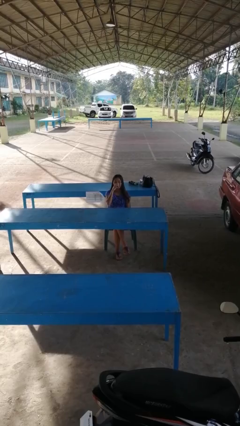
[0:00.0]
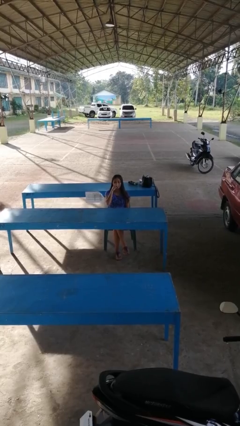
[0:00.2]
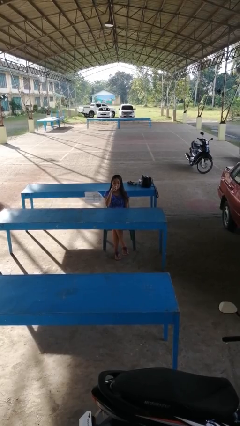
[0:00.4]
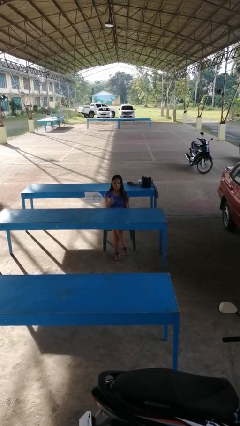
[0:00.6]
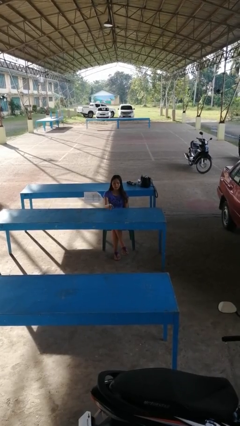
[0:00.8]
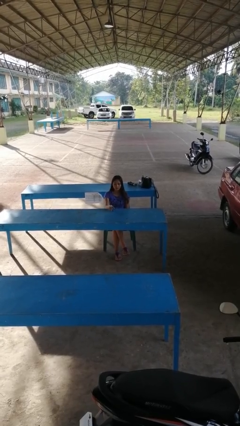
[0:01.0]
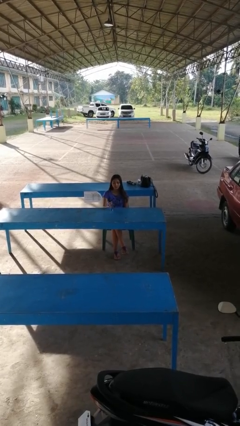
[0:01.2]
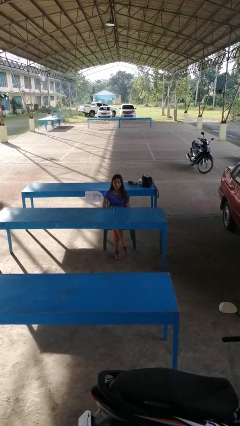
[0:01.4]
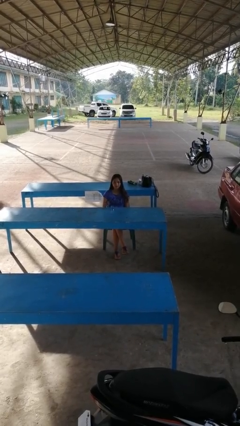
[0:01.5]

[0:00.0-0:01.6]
person puts down object on table

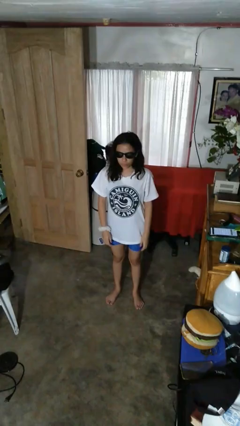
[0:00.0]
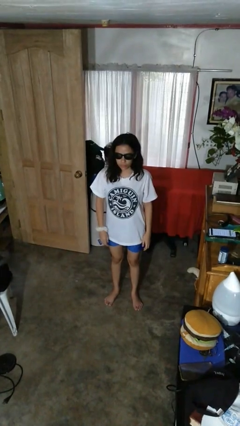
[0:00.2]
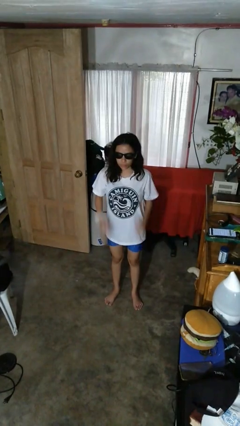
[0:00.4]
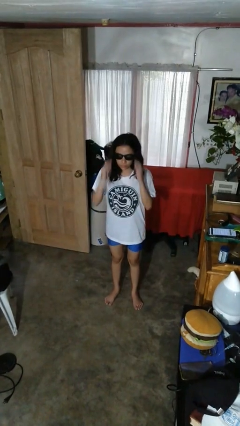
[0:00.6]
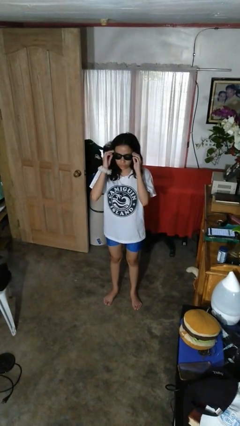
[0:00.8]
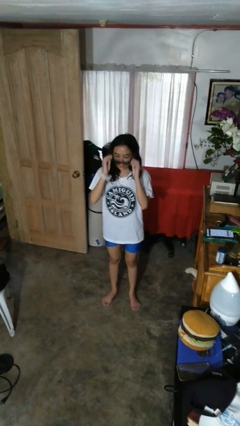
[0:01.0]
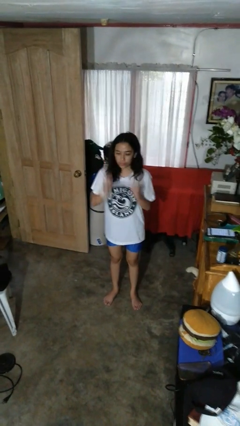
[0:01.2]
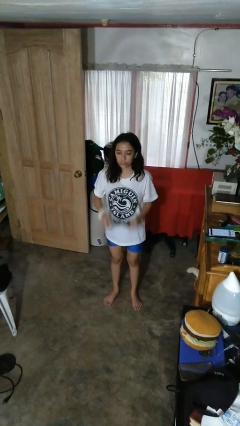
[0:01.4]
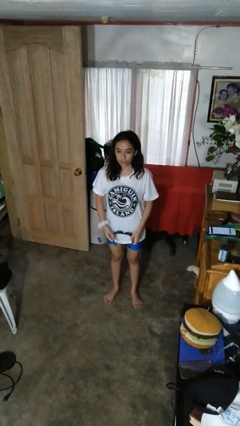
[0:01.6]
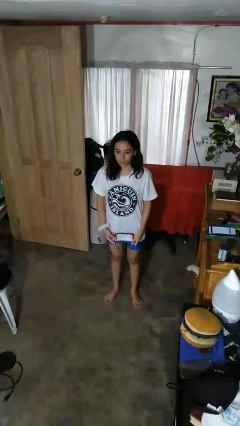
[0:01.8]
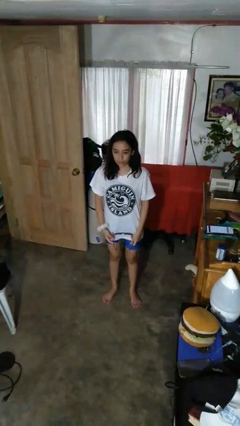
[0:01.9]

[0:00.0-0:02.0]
person takes off sunglasses

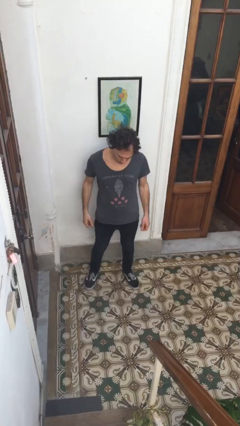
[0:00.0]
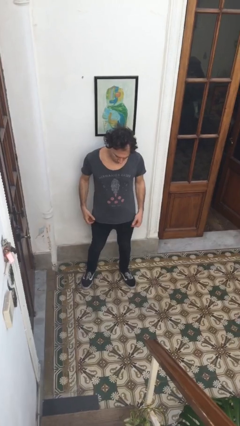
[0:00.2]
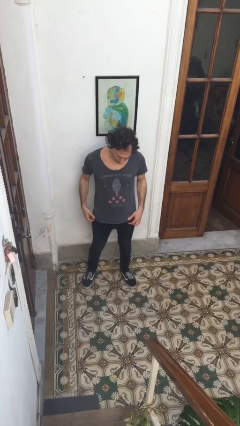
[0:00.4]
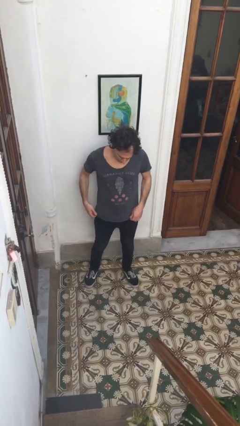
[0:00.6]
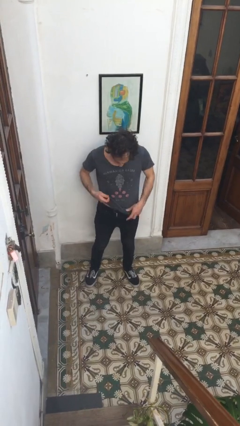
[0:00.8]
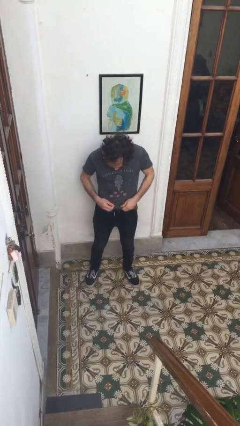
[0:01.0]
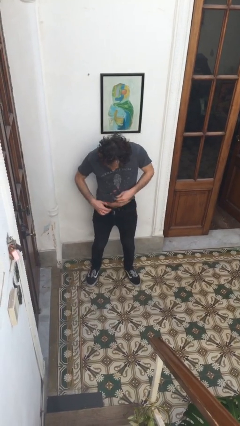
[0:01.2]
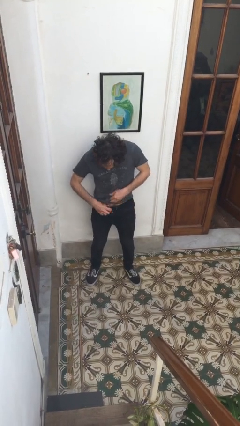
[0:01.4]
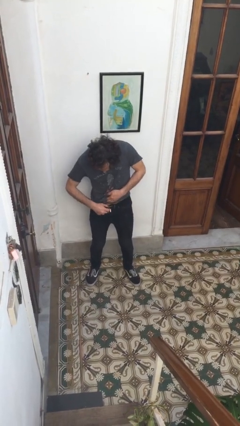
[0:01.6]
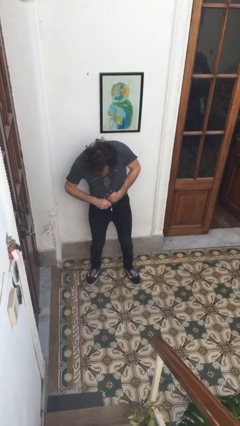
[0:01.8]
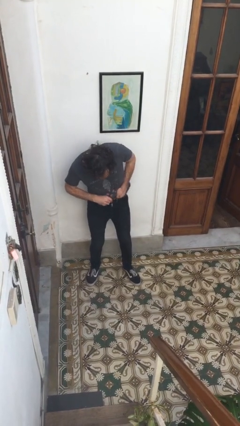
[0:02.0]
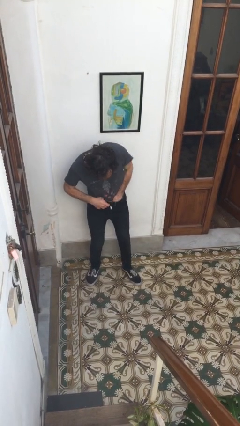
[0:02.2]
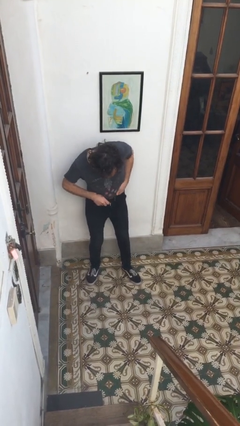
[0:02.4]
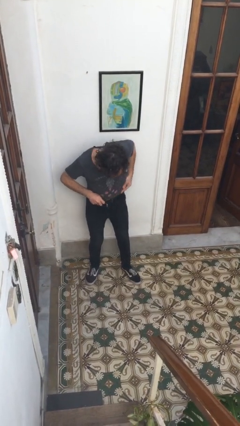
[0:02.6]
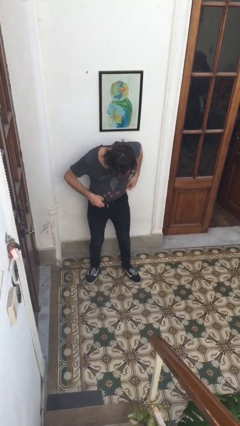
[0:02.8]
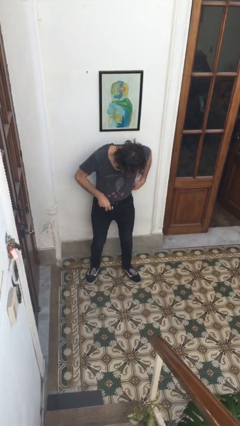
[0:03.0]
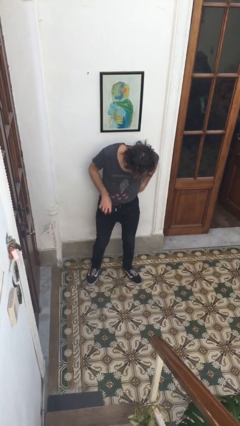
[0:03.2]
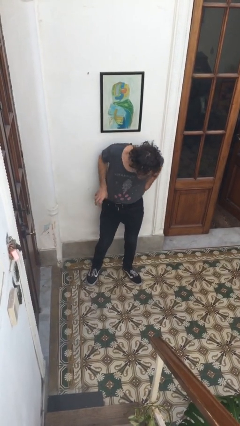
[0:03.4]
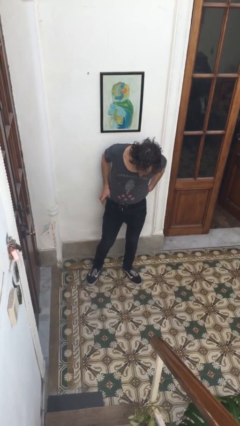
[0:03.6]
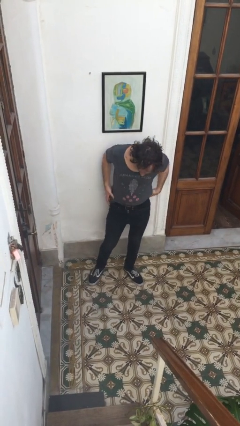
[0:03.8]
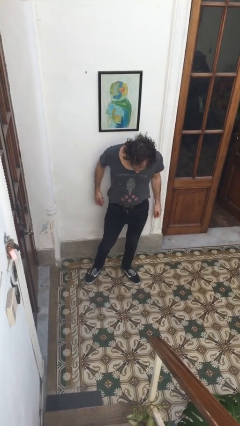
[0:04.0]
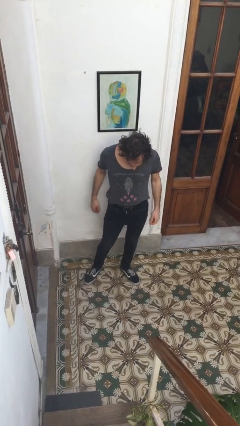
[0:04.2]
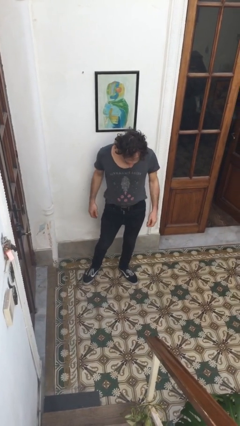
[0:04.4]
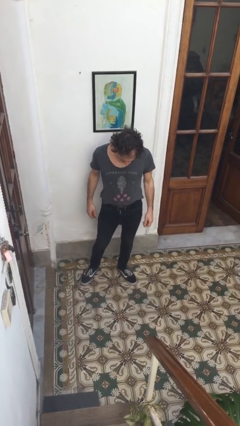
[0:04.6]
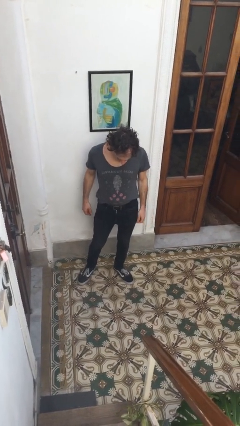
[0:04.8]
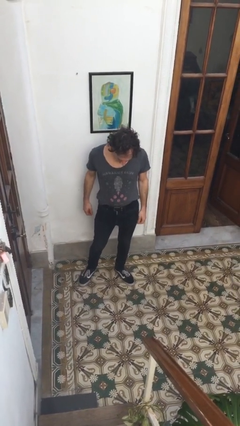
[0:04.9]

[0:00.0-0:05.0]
person tucks in shirt

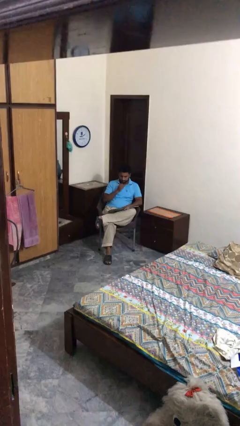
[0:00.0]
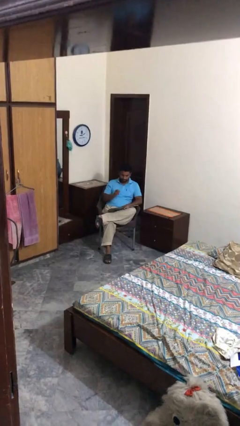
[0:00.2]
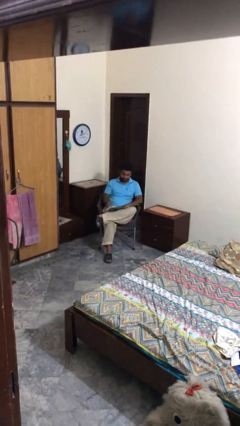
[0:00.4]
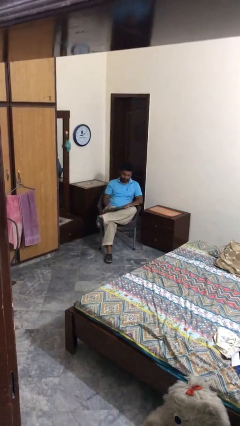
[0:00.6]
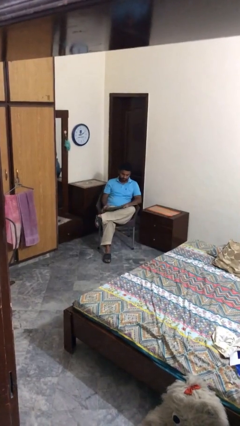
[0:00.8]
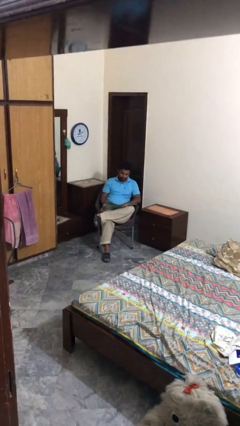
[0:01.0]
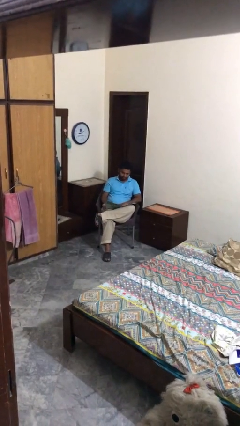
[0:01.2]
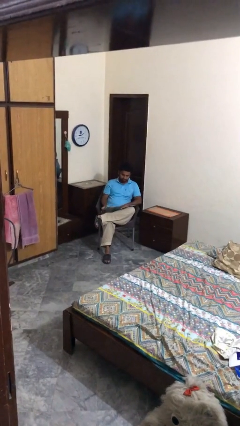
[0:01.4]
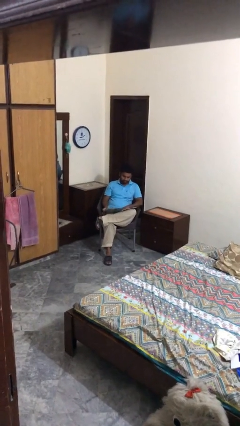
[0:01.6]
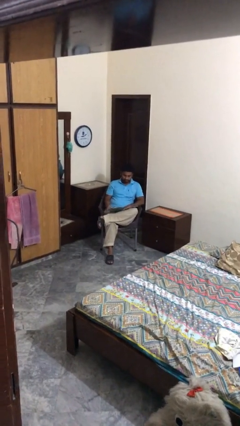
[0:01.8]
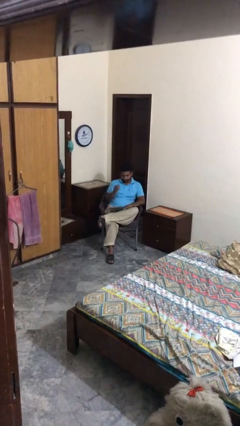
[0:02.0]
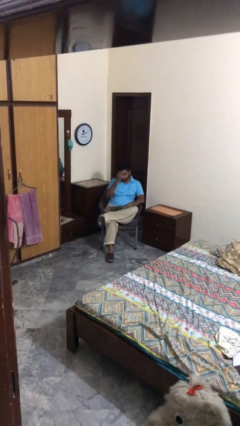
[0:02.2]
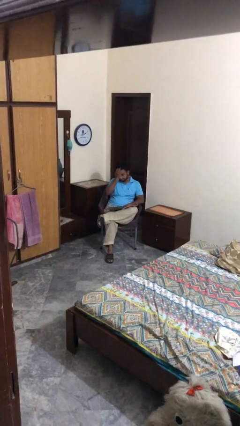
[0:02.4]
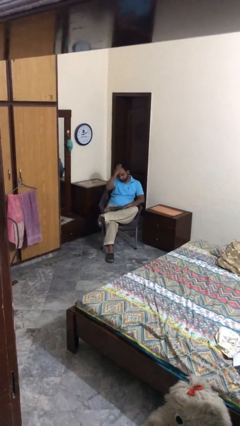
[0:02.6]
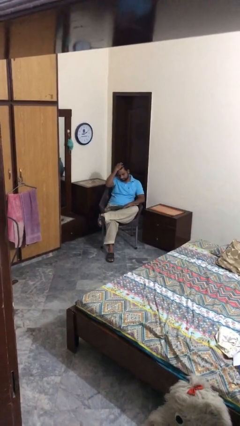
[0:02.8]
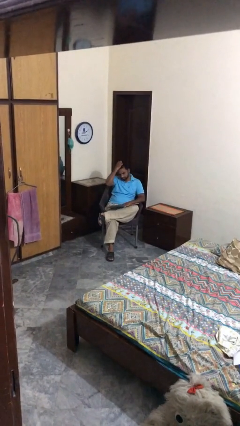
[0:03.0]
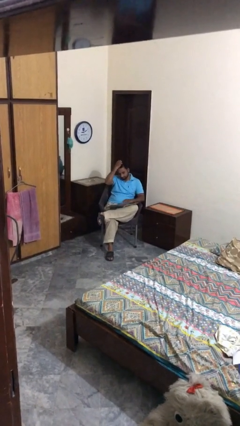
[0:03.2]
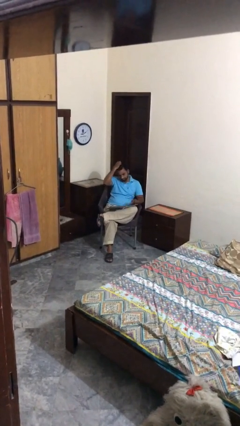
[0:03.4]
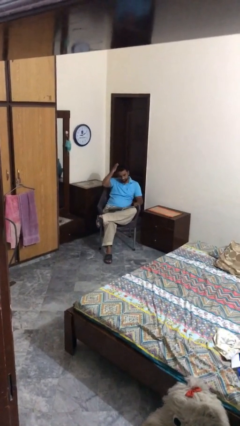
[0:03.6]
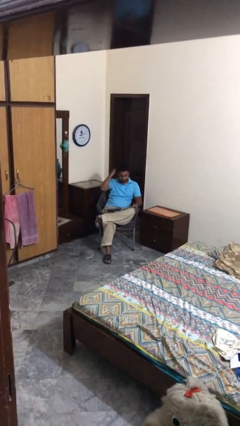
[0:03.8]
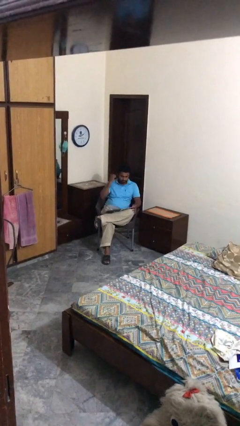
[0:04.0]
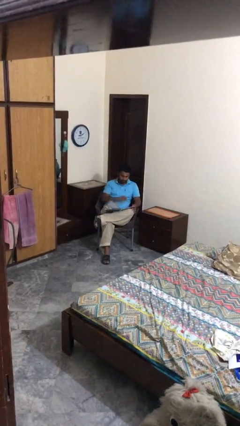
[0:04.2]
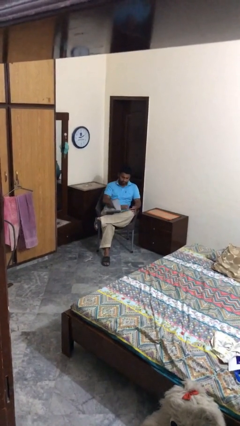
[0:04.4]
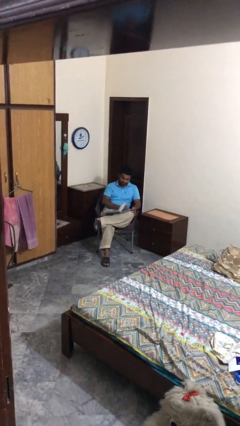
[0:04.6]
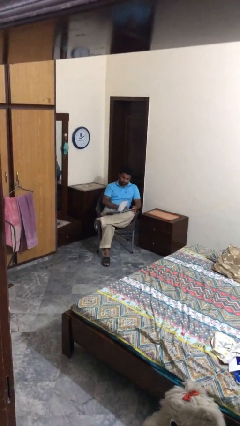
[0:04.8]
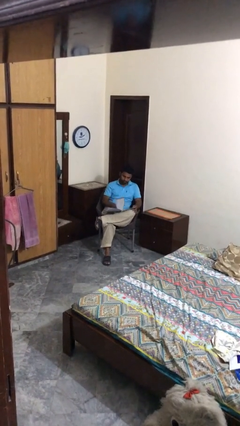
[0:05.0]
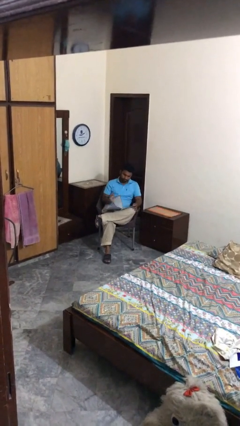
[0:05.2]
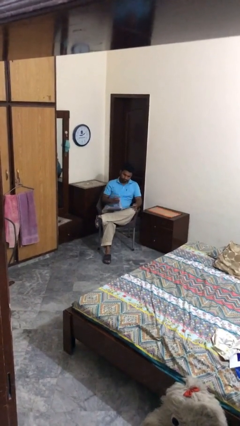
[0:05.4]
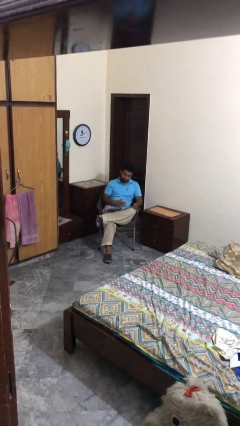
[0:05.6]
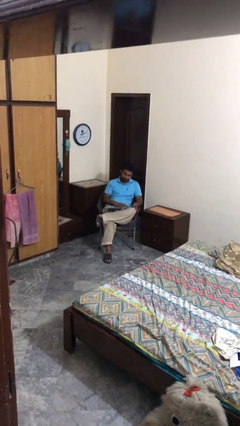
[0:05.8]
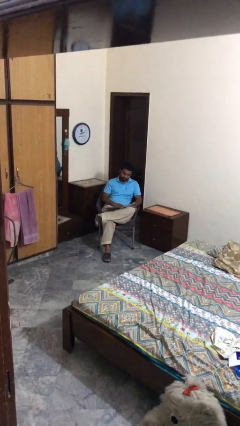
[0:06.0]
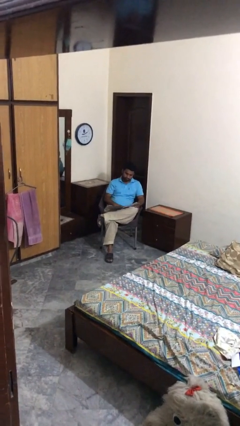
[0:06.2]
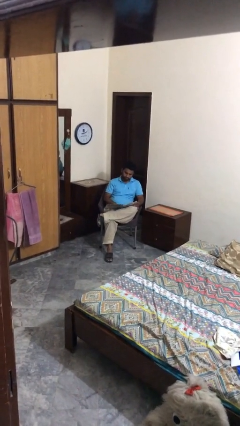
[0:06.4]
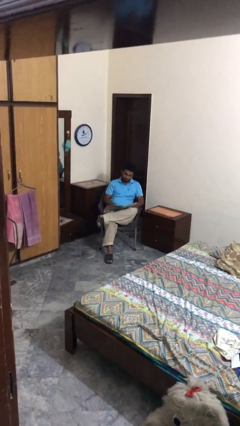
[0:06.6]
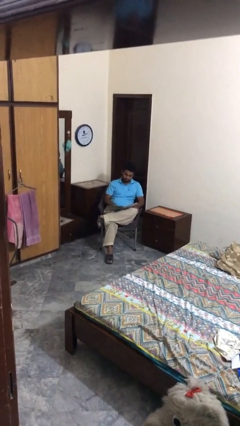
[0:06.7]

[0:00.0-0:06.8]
person reads document

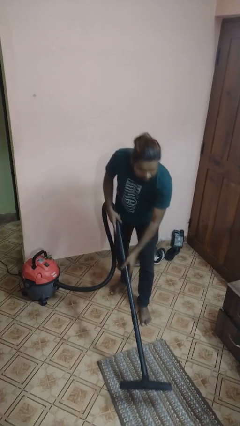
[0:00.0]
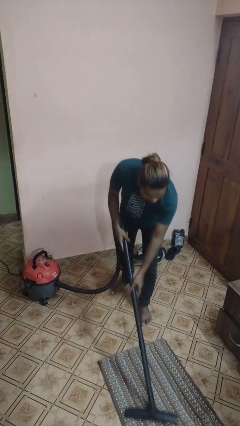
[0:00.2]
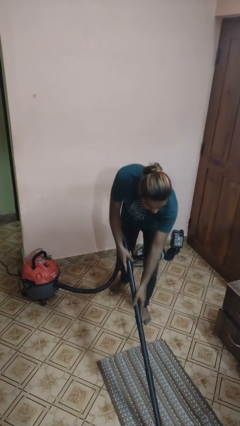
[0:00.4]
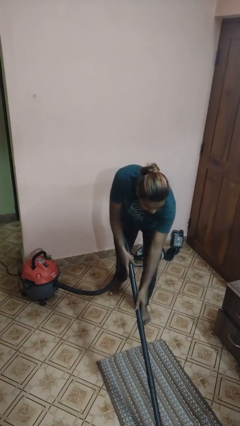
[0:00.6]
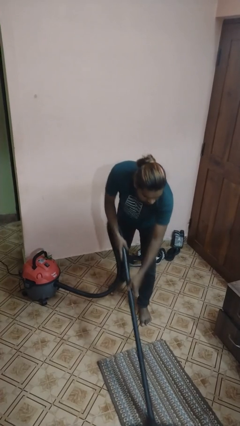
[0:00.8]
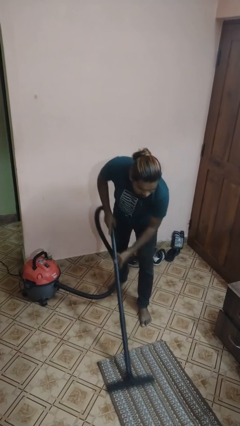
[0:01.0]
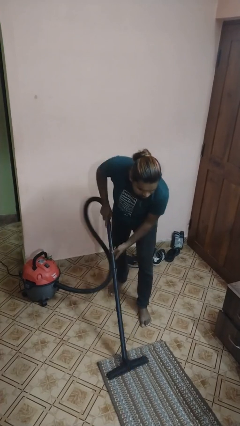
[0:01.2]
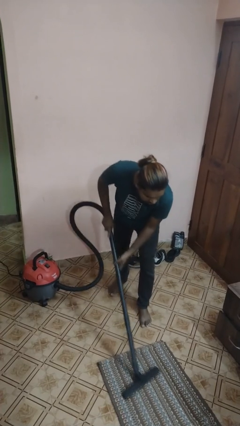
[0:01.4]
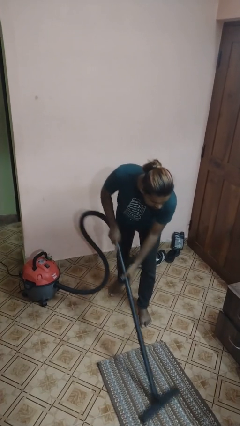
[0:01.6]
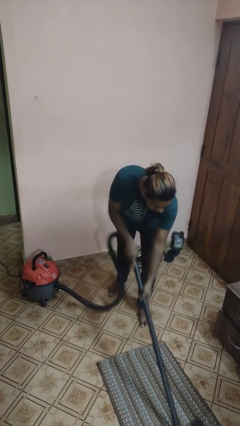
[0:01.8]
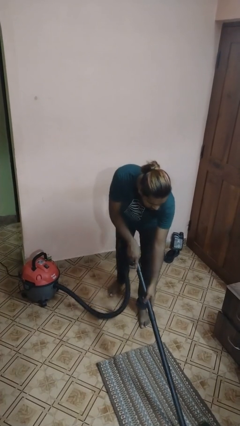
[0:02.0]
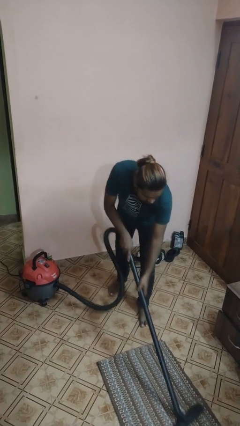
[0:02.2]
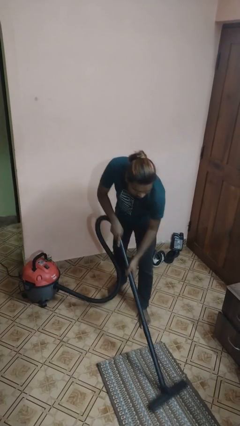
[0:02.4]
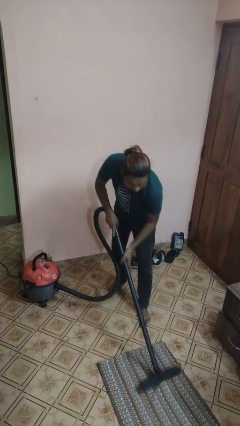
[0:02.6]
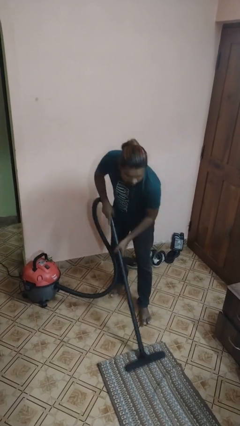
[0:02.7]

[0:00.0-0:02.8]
person vacuums carpet
